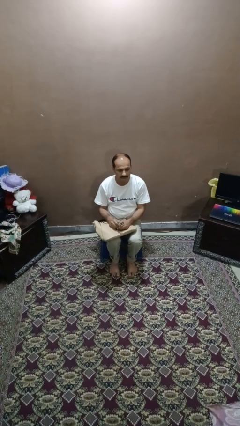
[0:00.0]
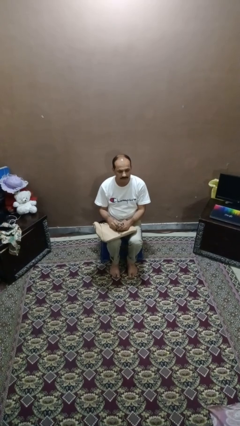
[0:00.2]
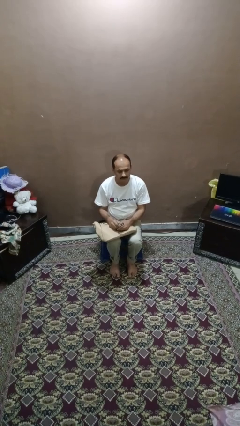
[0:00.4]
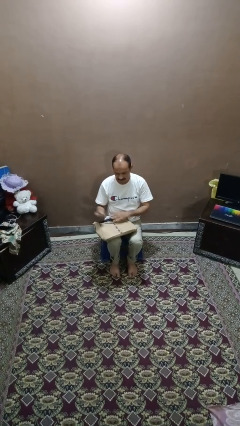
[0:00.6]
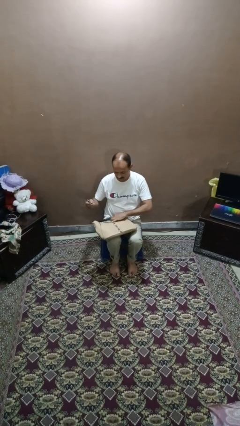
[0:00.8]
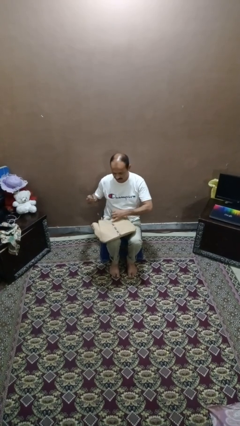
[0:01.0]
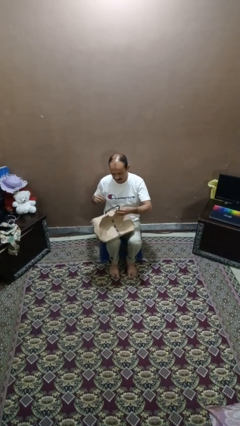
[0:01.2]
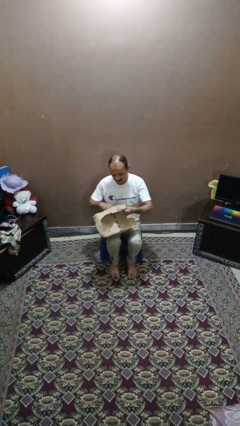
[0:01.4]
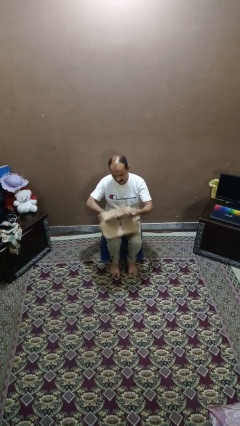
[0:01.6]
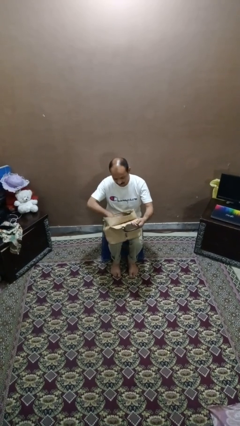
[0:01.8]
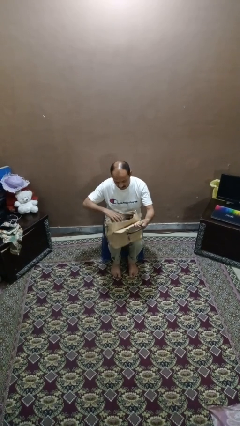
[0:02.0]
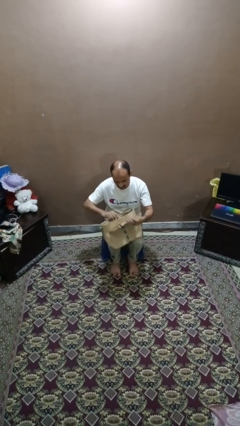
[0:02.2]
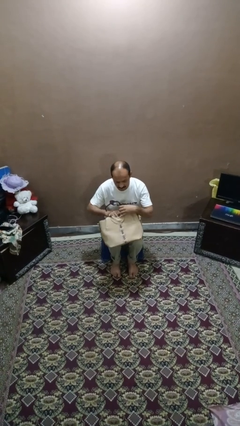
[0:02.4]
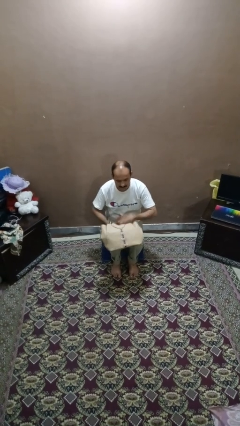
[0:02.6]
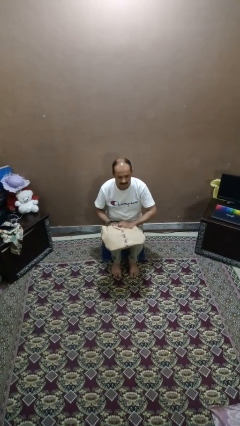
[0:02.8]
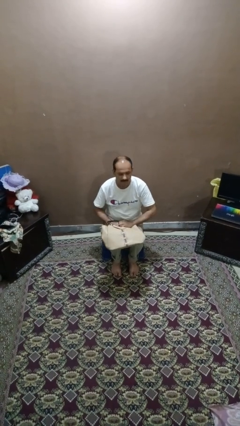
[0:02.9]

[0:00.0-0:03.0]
person puts object into purse

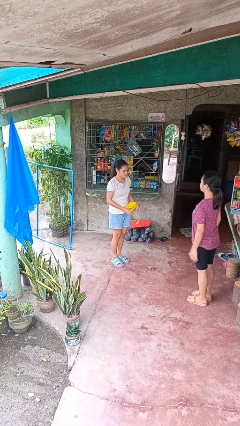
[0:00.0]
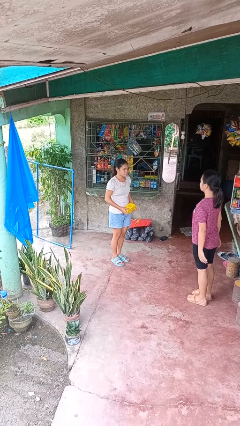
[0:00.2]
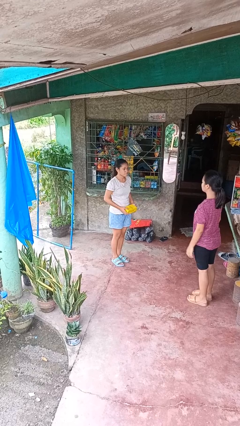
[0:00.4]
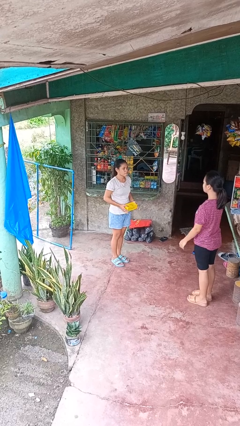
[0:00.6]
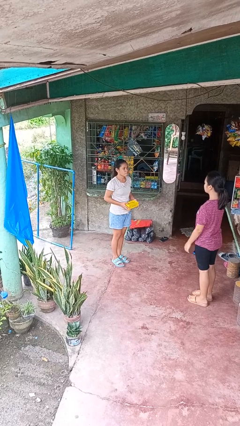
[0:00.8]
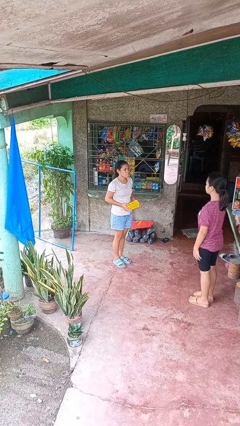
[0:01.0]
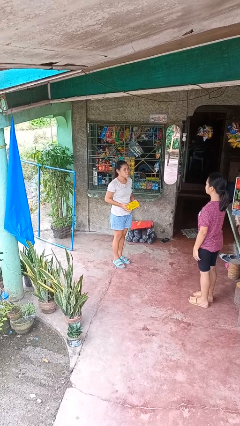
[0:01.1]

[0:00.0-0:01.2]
person catches object from person

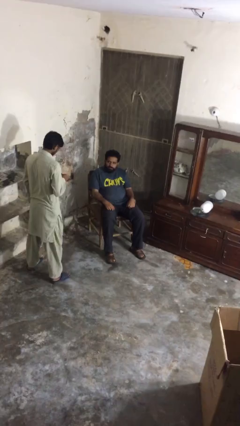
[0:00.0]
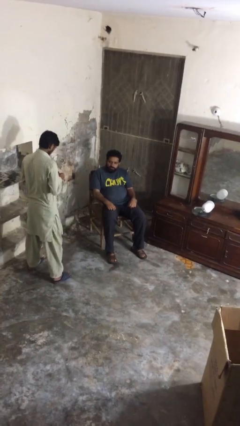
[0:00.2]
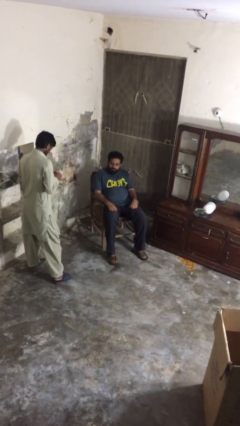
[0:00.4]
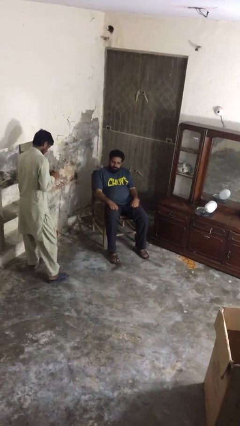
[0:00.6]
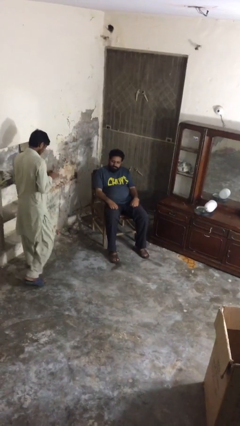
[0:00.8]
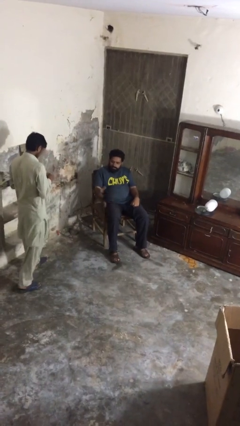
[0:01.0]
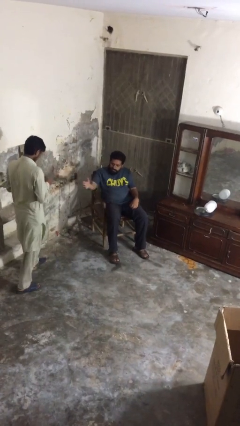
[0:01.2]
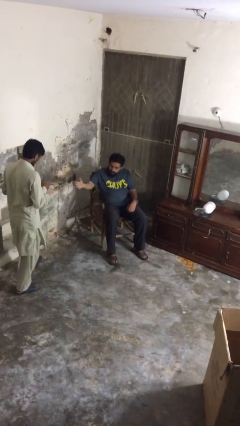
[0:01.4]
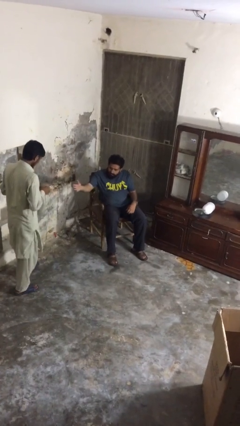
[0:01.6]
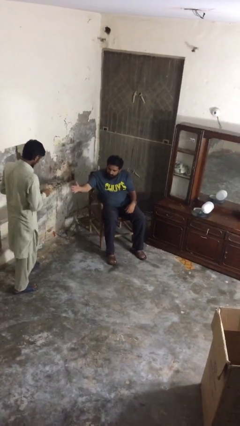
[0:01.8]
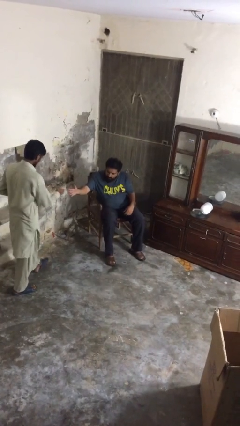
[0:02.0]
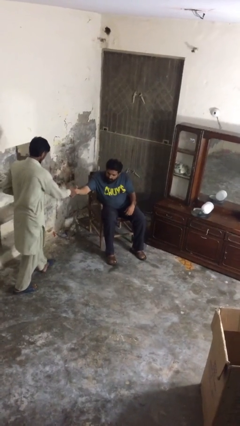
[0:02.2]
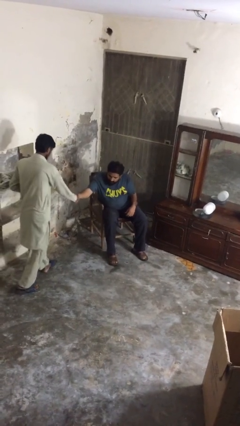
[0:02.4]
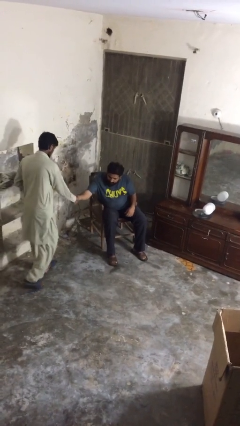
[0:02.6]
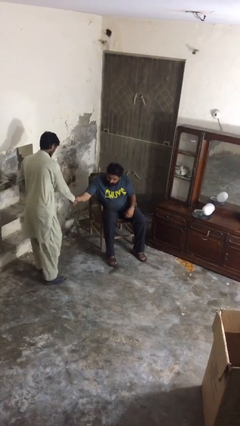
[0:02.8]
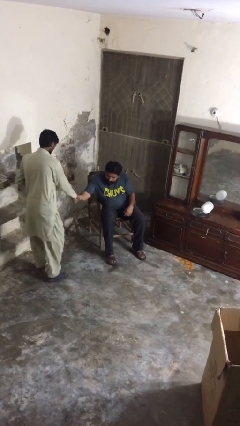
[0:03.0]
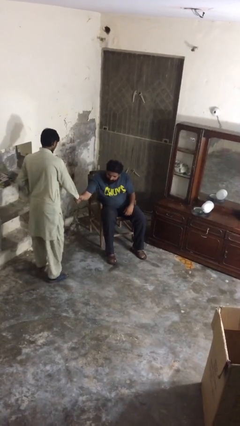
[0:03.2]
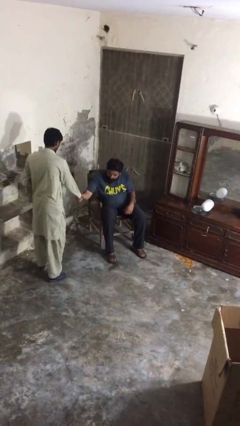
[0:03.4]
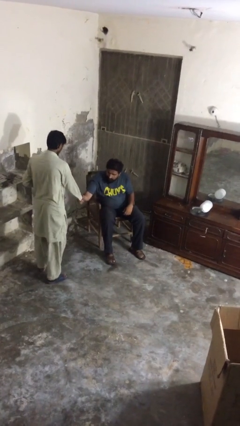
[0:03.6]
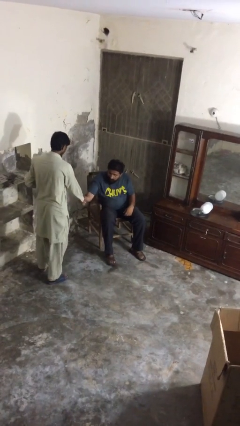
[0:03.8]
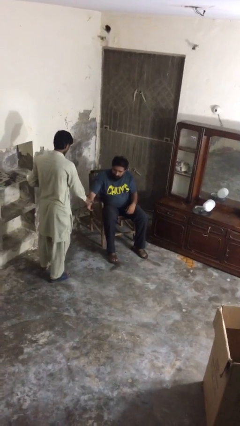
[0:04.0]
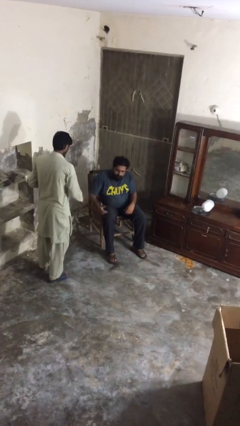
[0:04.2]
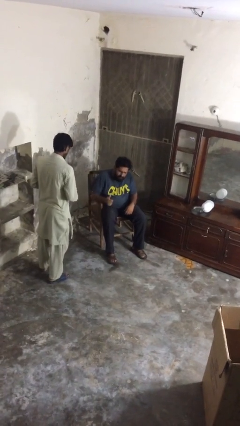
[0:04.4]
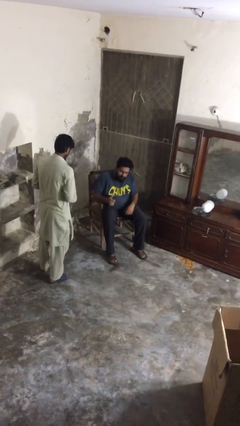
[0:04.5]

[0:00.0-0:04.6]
person shakes hand

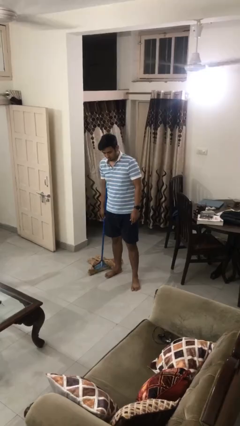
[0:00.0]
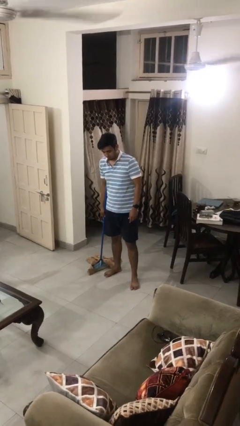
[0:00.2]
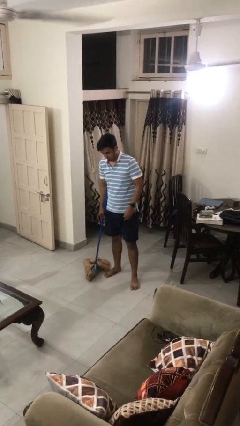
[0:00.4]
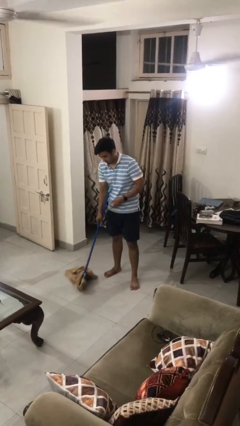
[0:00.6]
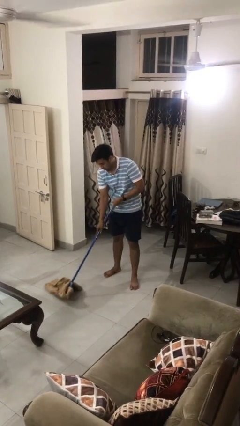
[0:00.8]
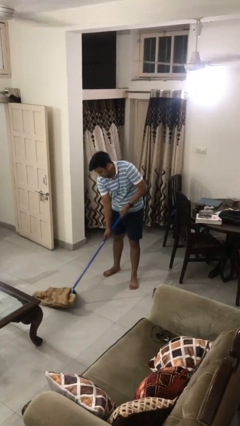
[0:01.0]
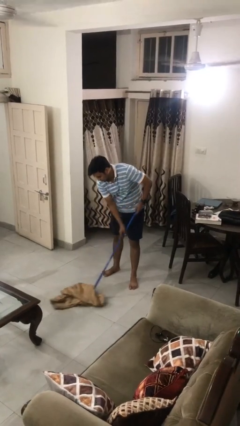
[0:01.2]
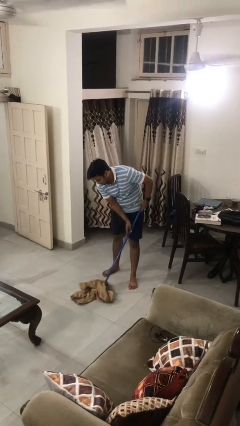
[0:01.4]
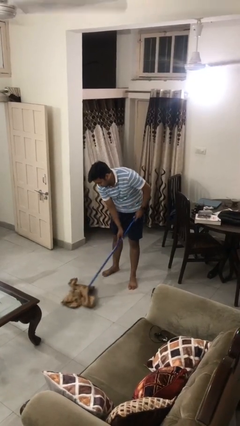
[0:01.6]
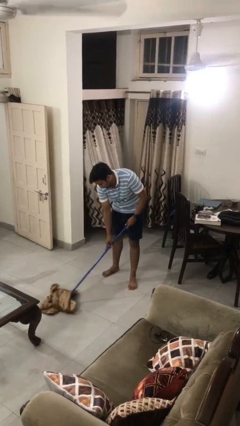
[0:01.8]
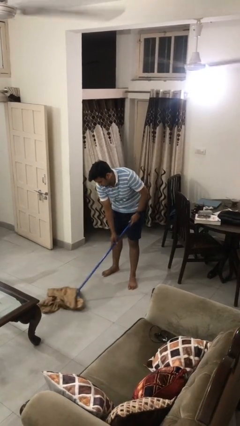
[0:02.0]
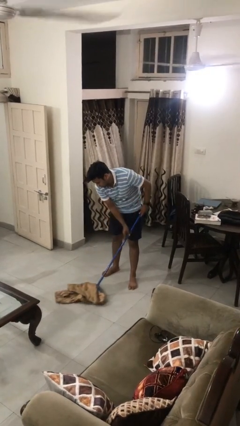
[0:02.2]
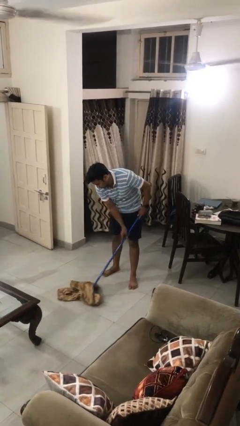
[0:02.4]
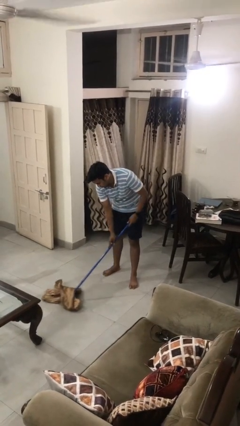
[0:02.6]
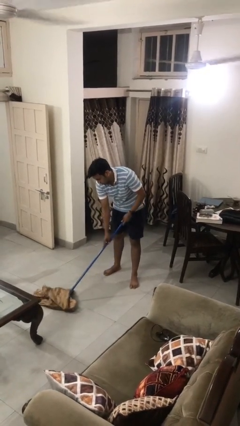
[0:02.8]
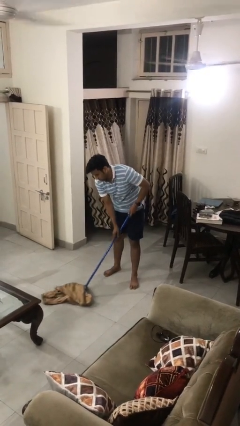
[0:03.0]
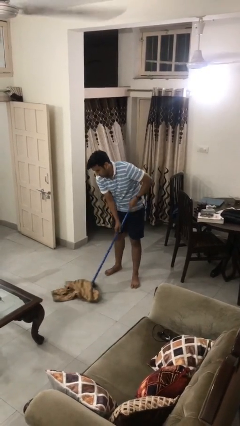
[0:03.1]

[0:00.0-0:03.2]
person mops

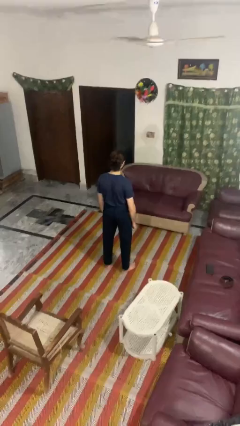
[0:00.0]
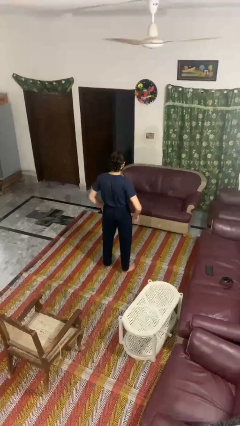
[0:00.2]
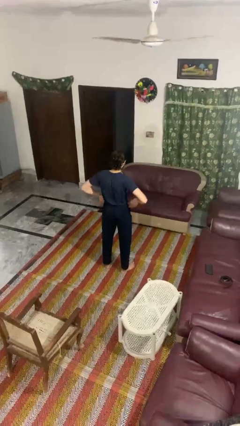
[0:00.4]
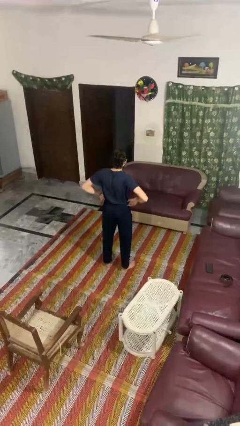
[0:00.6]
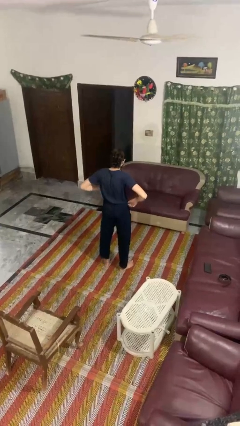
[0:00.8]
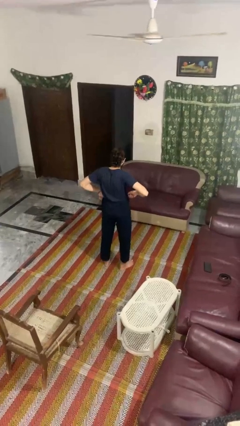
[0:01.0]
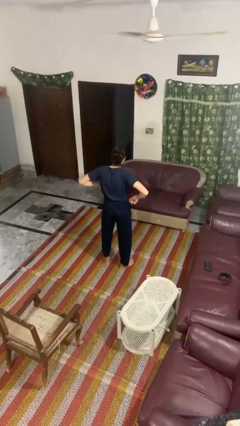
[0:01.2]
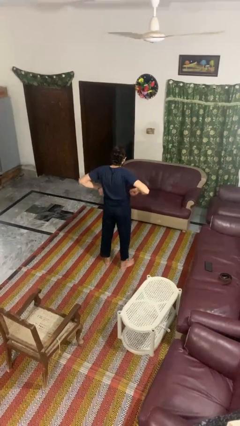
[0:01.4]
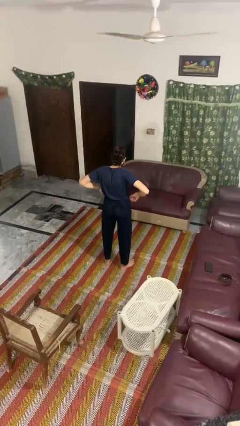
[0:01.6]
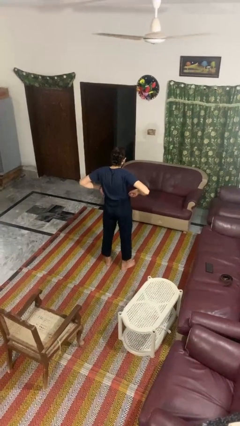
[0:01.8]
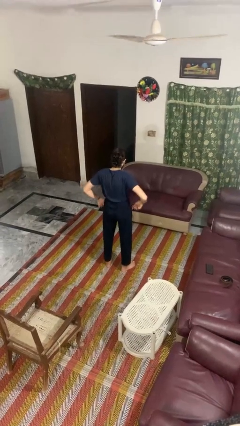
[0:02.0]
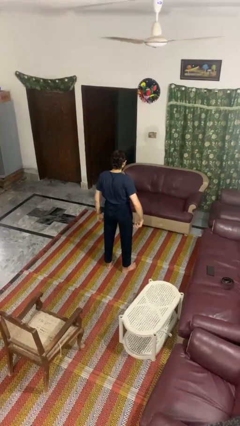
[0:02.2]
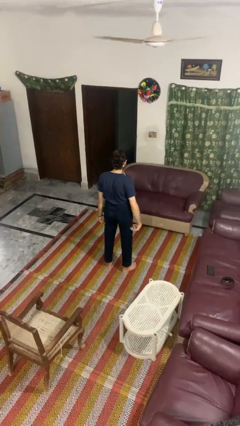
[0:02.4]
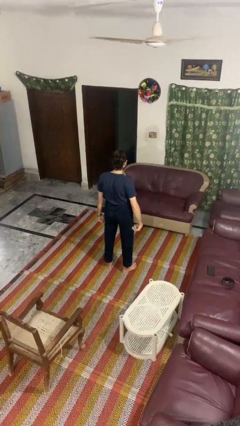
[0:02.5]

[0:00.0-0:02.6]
person hikes up pants

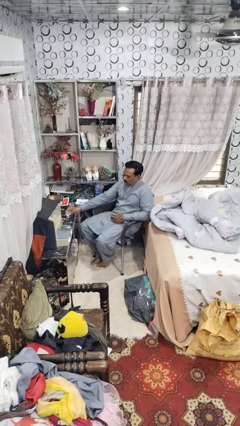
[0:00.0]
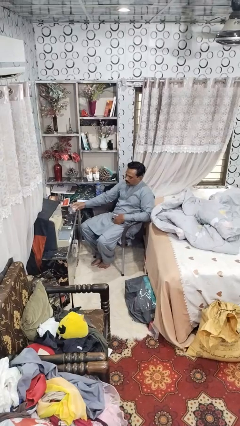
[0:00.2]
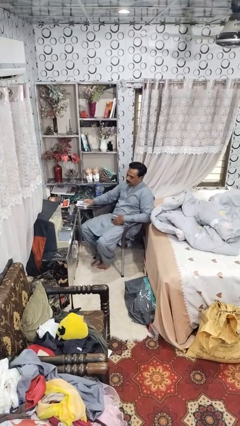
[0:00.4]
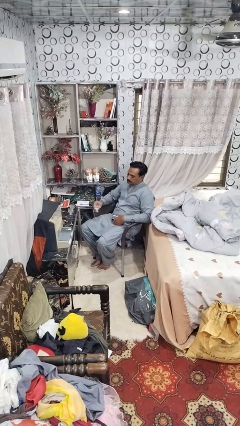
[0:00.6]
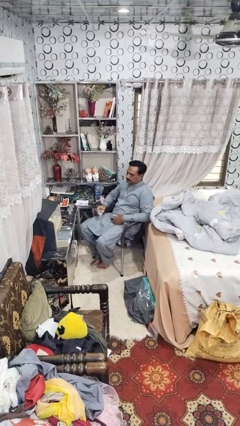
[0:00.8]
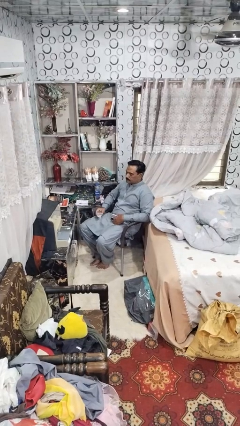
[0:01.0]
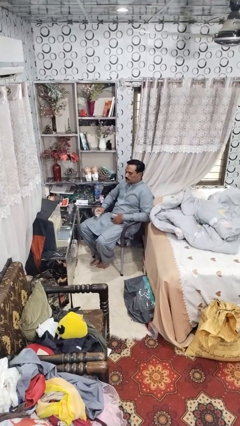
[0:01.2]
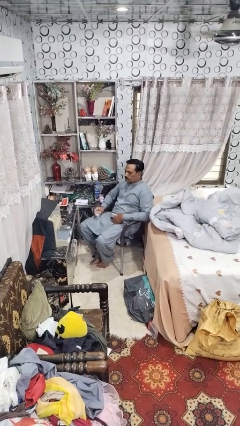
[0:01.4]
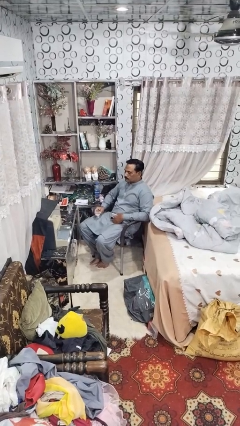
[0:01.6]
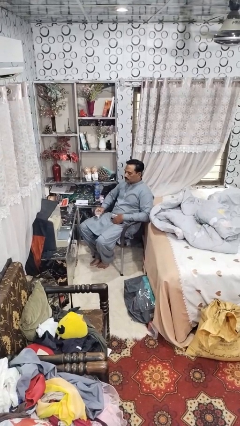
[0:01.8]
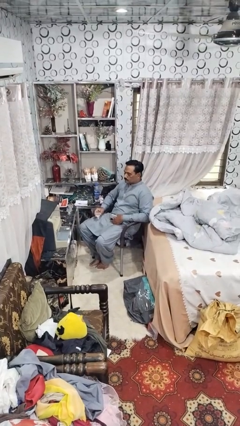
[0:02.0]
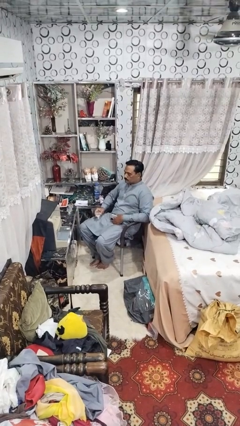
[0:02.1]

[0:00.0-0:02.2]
person picks up object from table

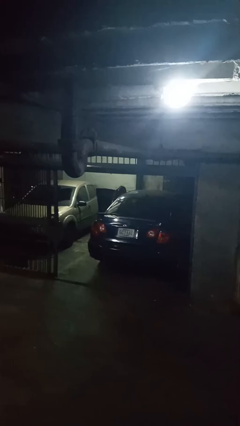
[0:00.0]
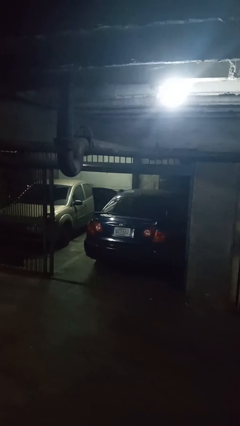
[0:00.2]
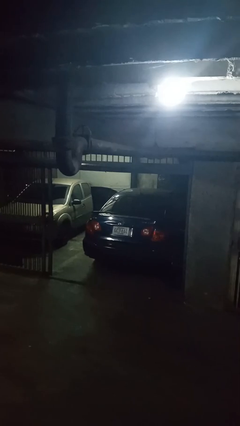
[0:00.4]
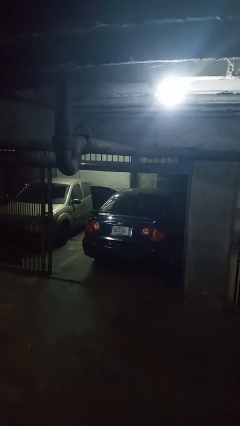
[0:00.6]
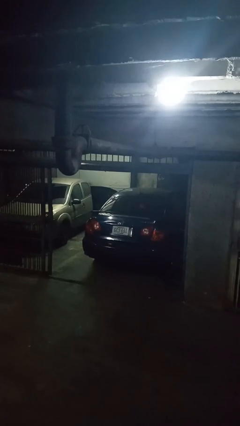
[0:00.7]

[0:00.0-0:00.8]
person loads car
